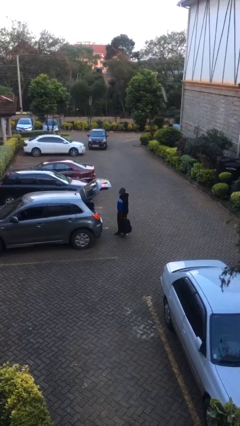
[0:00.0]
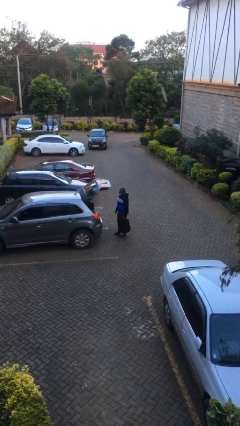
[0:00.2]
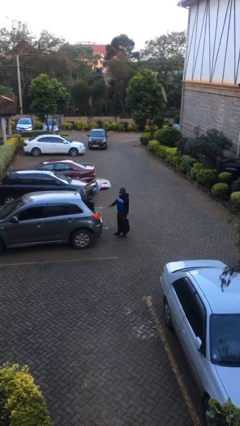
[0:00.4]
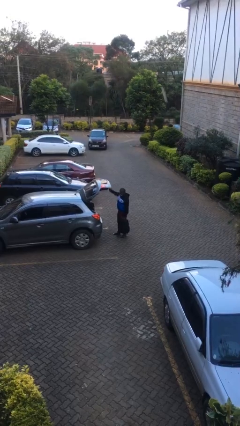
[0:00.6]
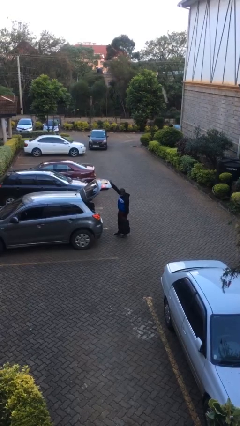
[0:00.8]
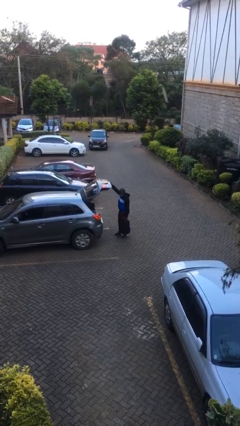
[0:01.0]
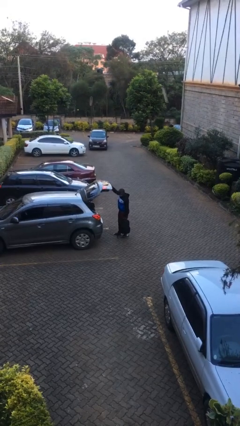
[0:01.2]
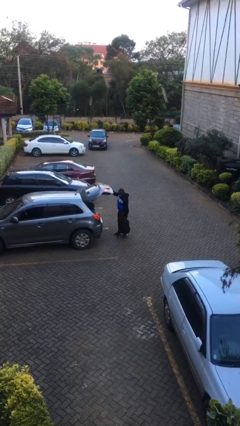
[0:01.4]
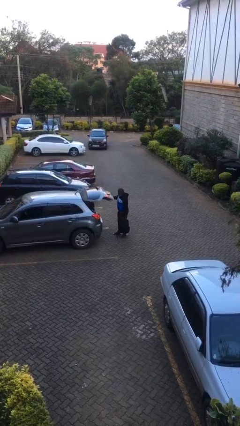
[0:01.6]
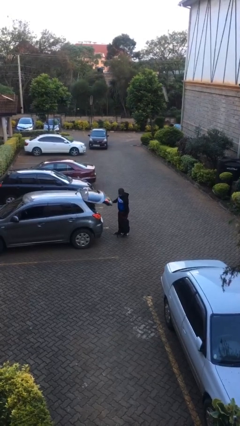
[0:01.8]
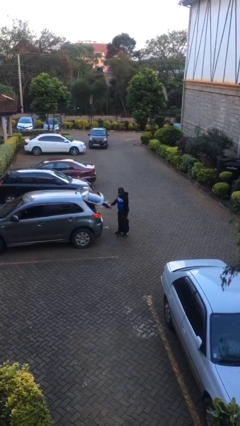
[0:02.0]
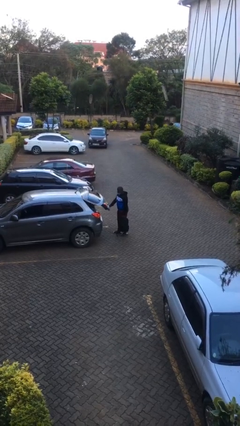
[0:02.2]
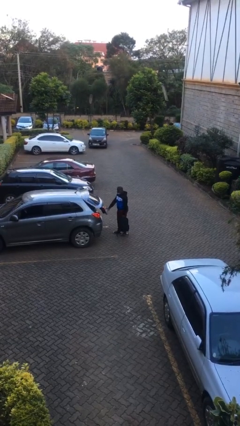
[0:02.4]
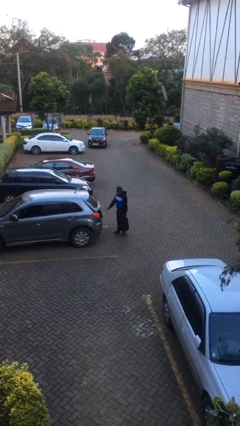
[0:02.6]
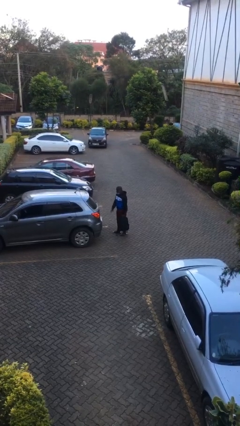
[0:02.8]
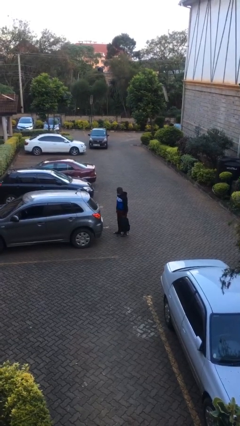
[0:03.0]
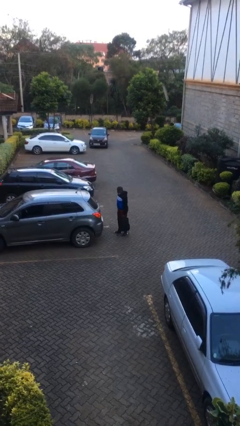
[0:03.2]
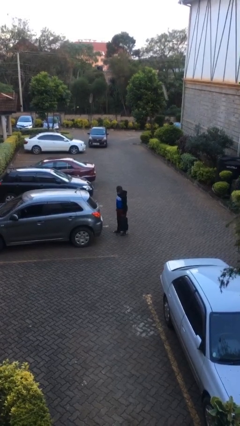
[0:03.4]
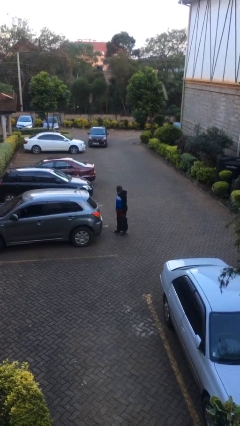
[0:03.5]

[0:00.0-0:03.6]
person closes car trunk

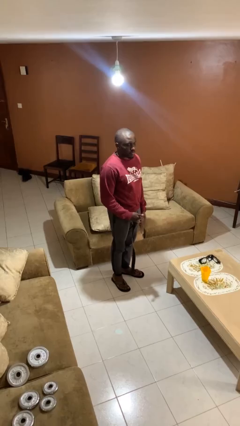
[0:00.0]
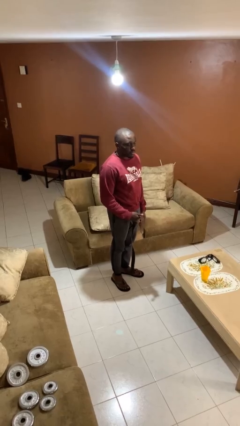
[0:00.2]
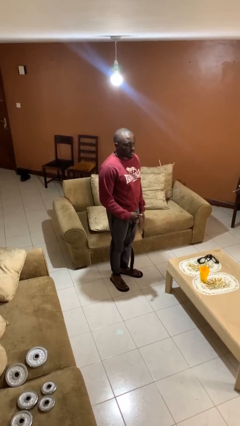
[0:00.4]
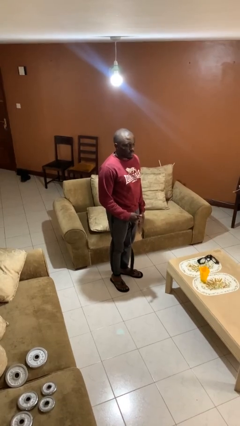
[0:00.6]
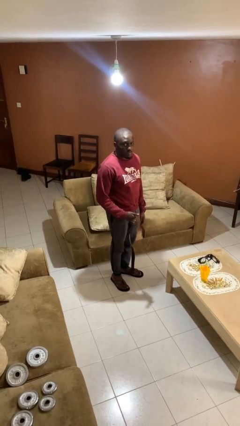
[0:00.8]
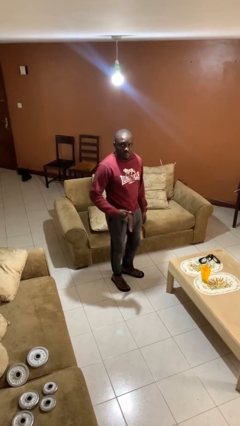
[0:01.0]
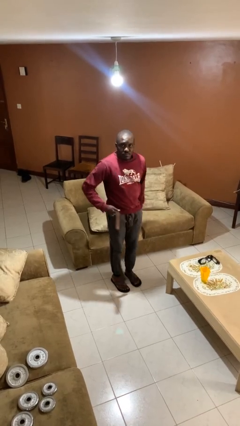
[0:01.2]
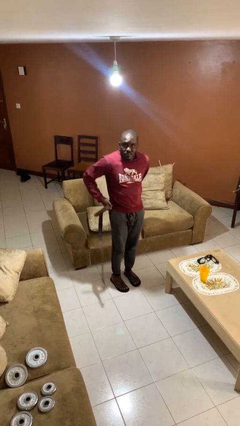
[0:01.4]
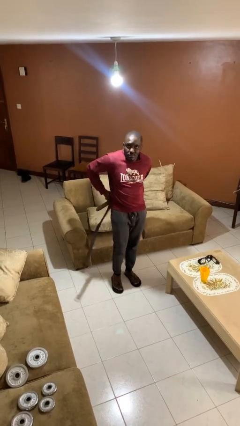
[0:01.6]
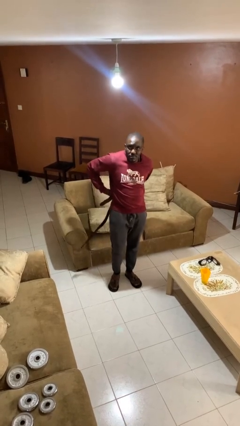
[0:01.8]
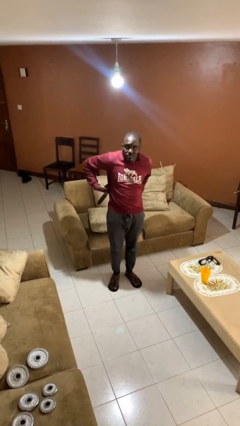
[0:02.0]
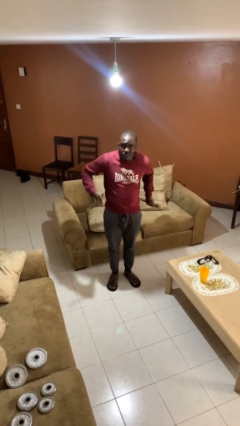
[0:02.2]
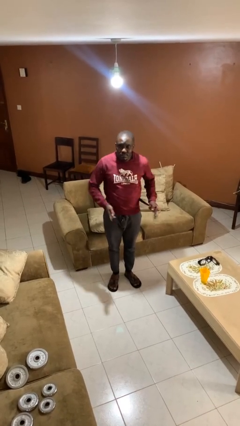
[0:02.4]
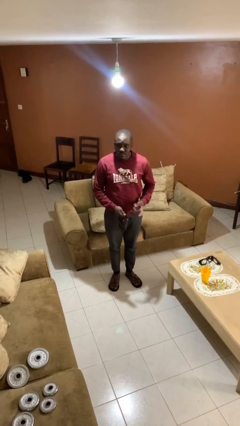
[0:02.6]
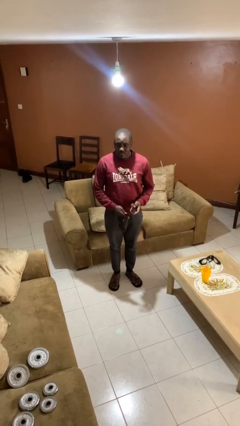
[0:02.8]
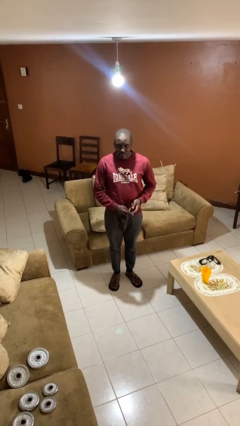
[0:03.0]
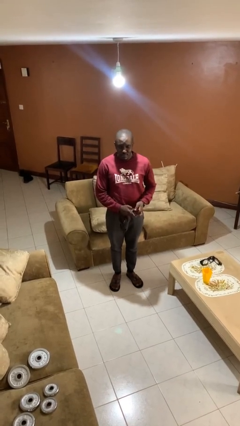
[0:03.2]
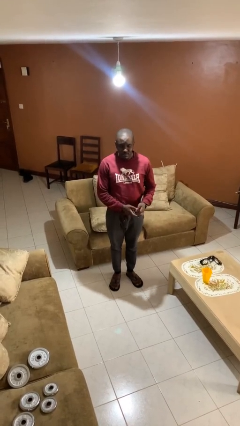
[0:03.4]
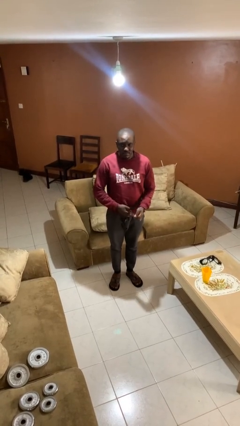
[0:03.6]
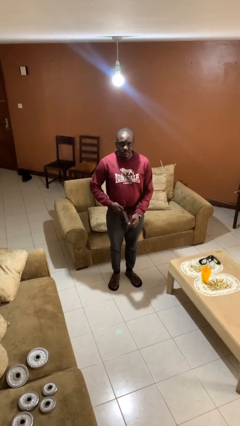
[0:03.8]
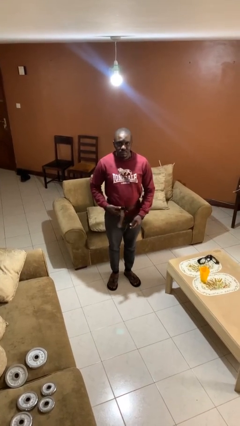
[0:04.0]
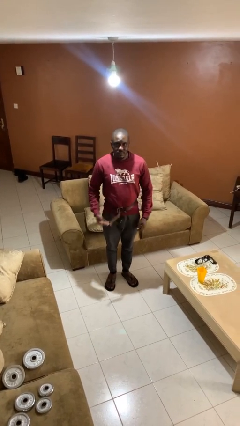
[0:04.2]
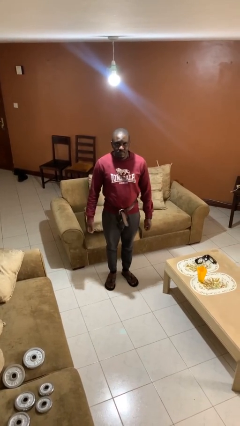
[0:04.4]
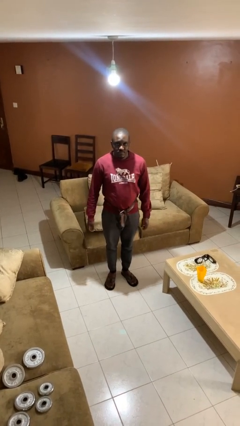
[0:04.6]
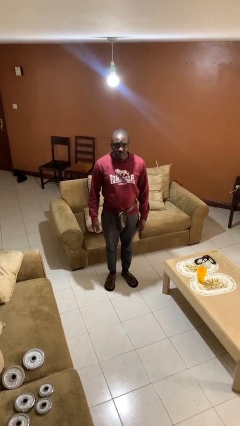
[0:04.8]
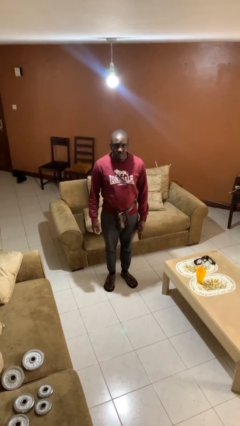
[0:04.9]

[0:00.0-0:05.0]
person puts on belt

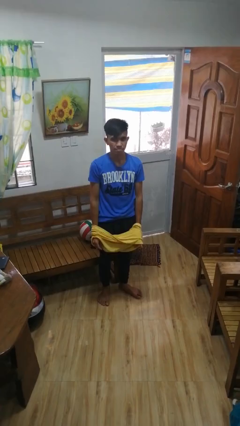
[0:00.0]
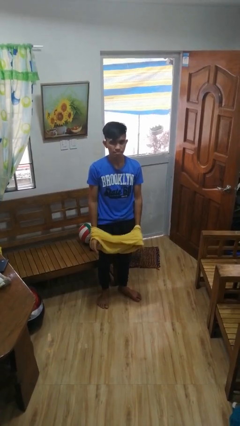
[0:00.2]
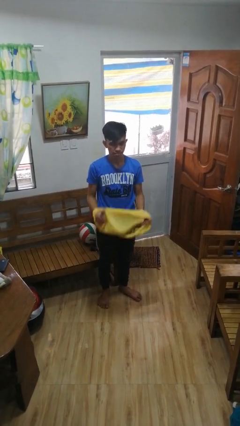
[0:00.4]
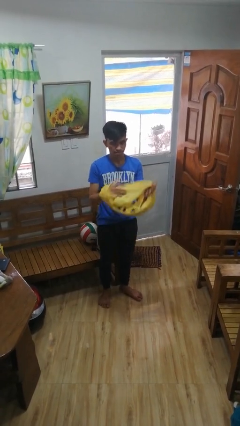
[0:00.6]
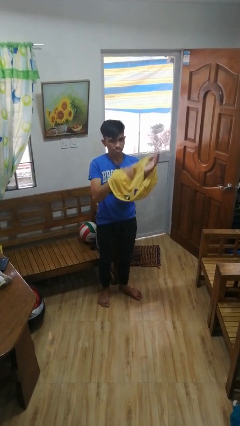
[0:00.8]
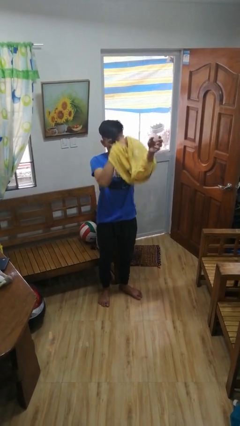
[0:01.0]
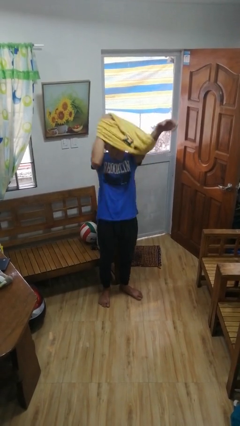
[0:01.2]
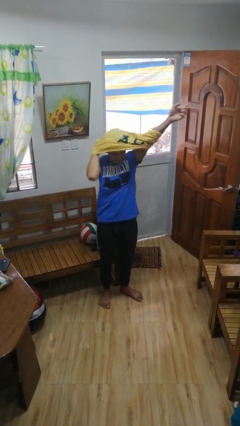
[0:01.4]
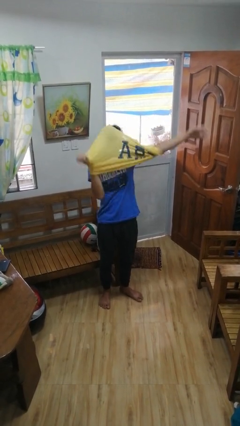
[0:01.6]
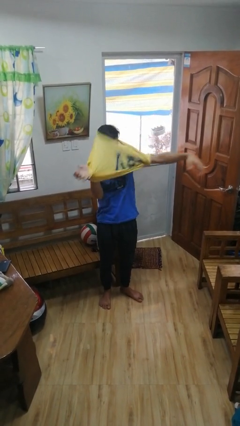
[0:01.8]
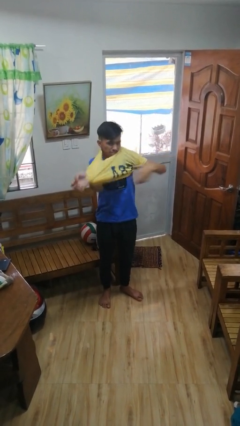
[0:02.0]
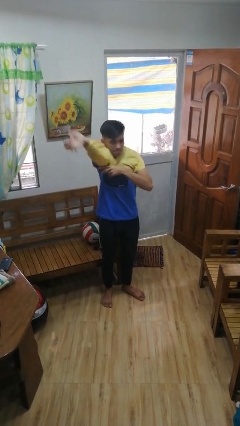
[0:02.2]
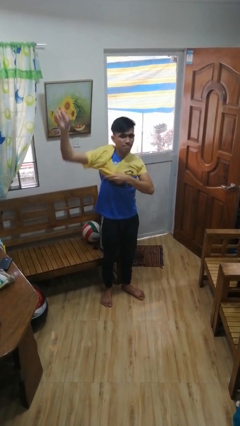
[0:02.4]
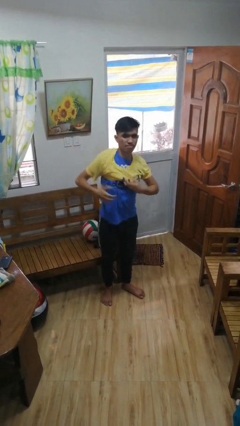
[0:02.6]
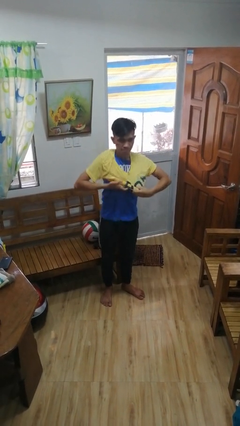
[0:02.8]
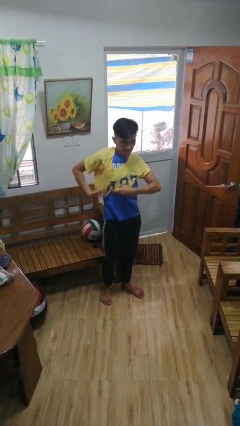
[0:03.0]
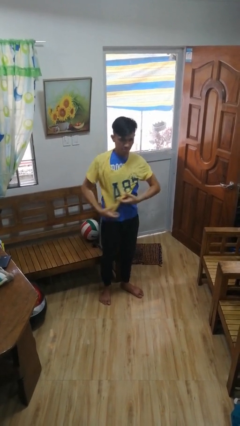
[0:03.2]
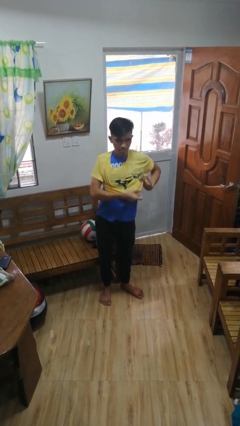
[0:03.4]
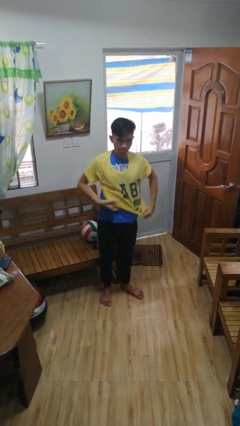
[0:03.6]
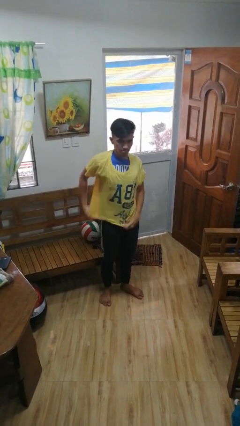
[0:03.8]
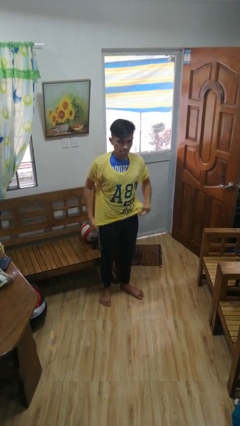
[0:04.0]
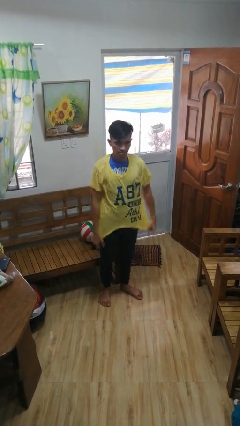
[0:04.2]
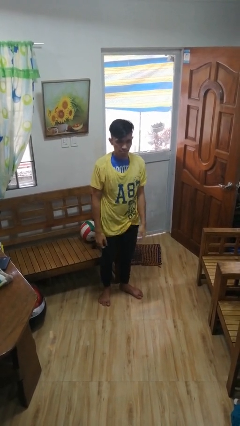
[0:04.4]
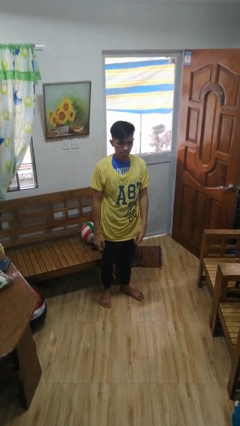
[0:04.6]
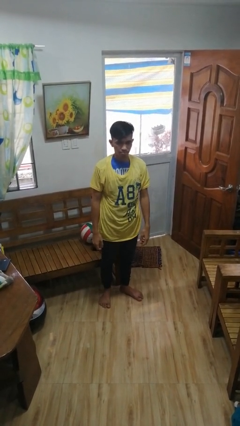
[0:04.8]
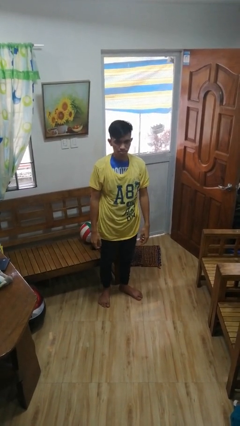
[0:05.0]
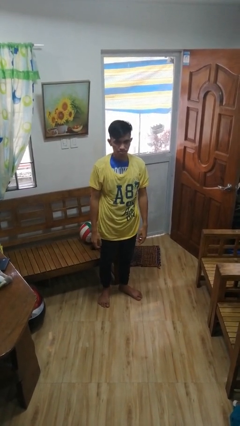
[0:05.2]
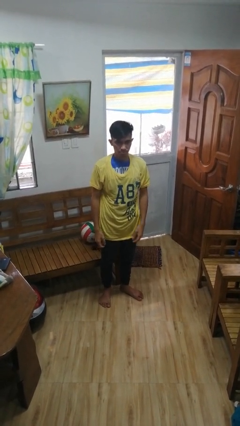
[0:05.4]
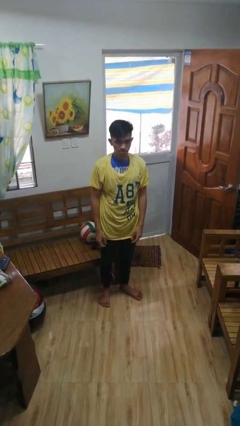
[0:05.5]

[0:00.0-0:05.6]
person puts on shirt

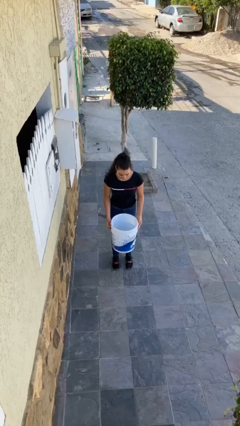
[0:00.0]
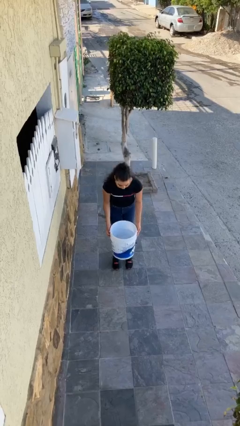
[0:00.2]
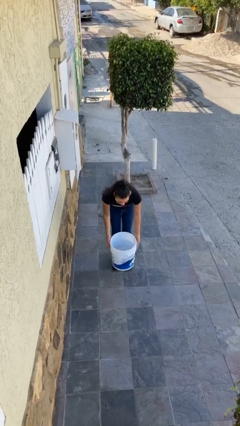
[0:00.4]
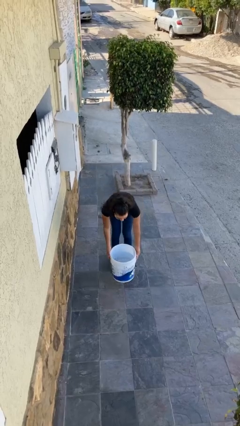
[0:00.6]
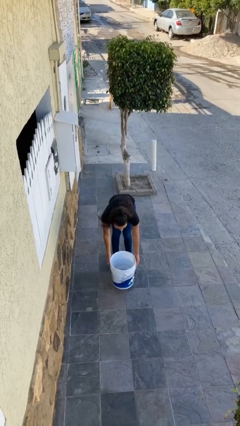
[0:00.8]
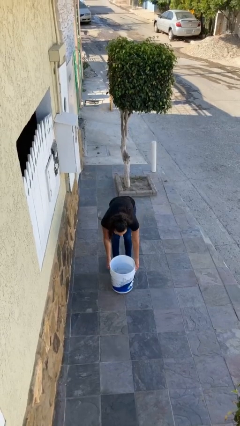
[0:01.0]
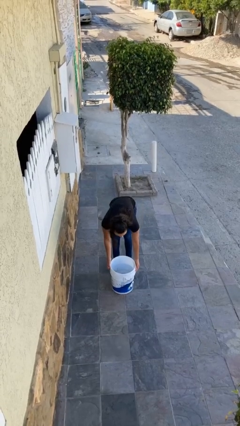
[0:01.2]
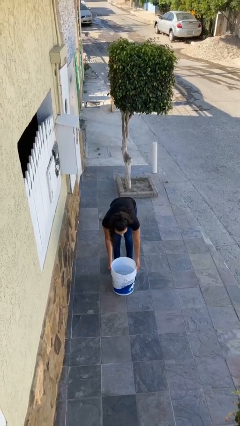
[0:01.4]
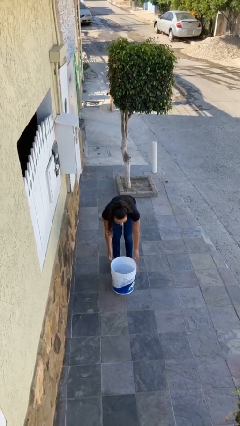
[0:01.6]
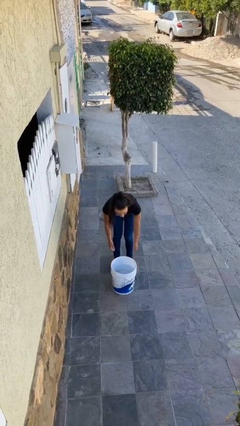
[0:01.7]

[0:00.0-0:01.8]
person puts down object on floor

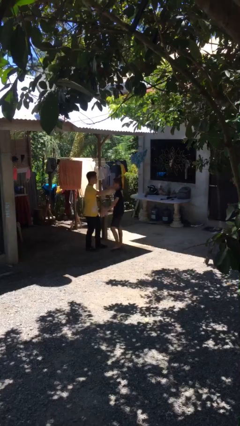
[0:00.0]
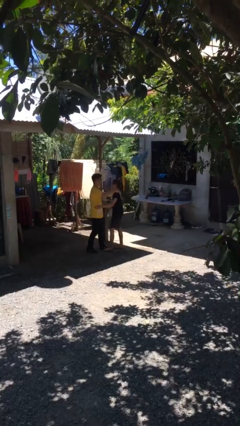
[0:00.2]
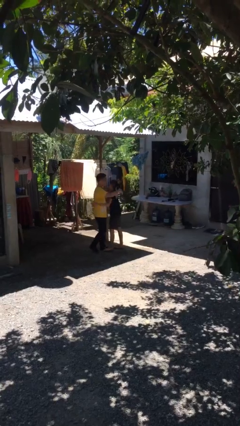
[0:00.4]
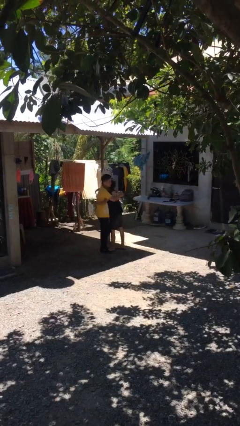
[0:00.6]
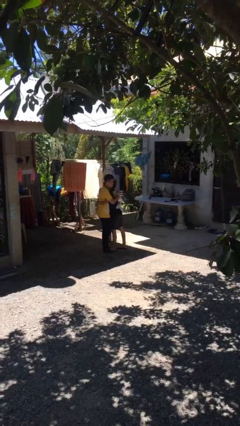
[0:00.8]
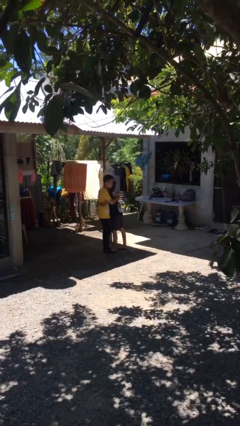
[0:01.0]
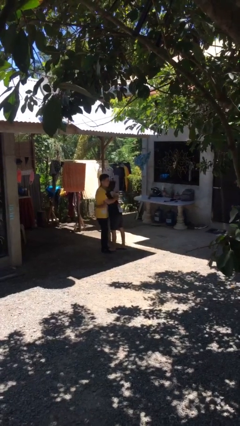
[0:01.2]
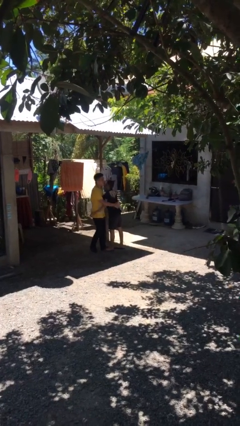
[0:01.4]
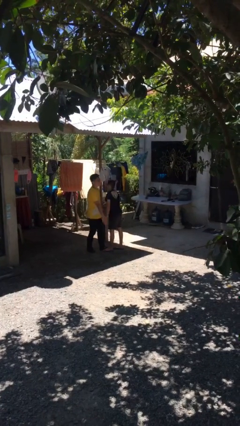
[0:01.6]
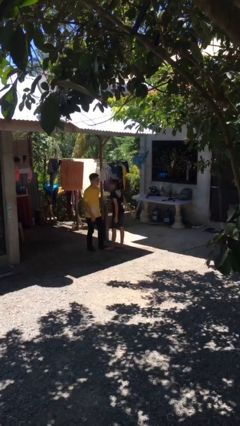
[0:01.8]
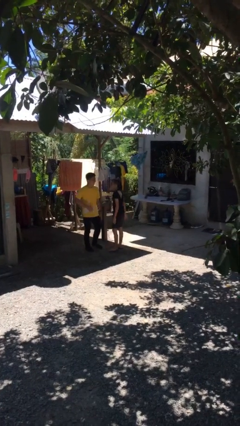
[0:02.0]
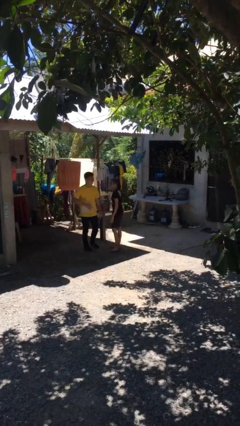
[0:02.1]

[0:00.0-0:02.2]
person embraces person
